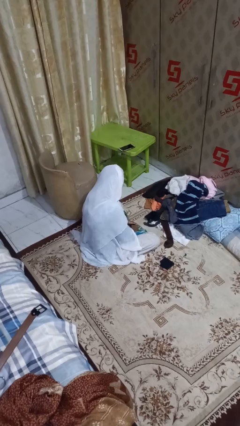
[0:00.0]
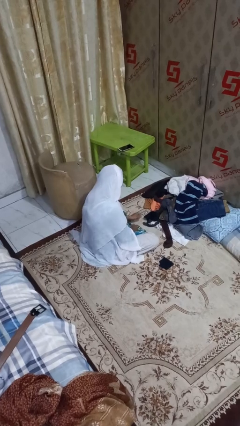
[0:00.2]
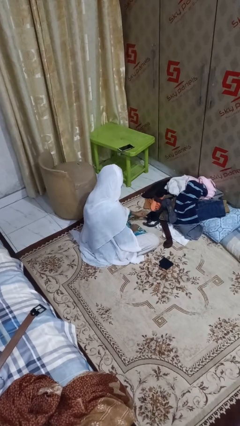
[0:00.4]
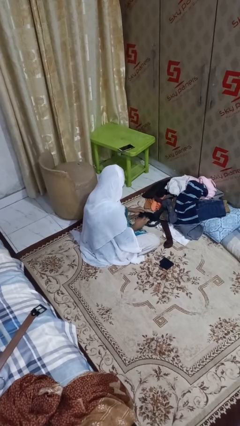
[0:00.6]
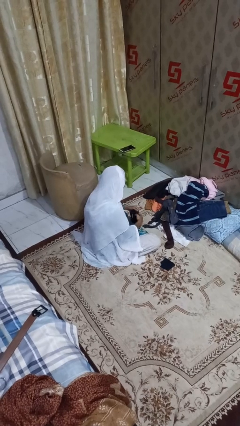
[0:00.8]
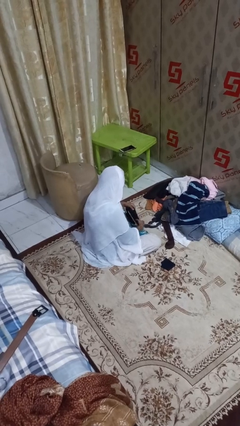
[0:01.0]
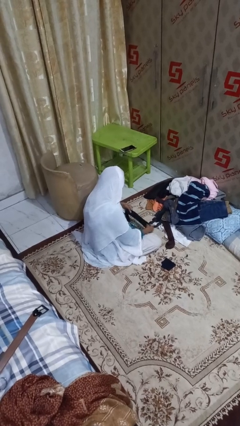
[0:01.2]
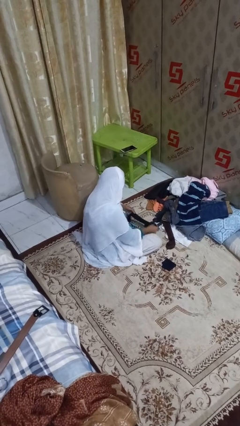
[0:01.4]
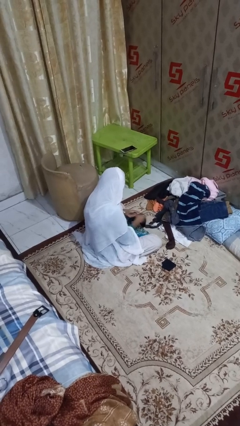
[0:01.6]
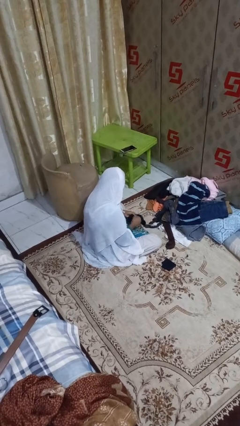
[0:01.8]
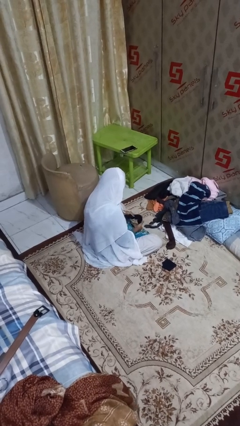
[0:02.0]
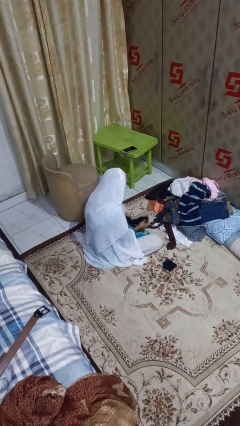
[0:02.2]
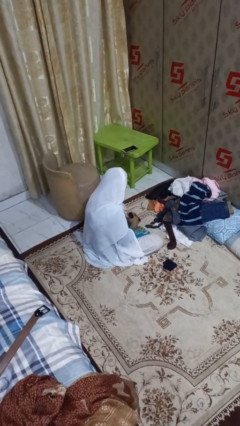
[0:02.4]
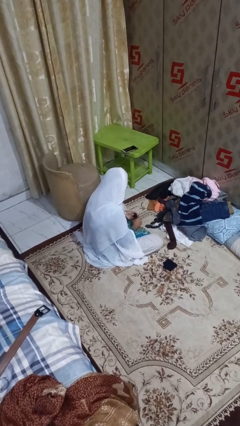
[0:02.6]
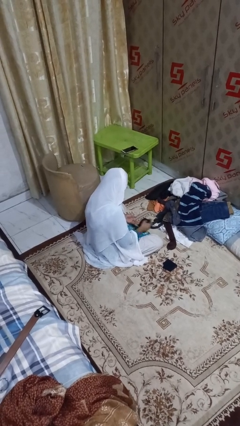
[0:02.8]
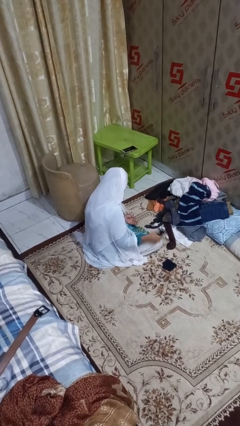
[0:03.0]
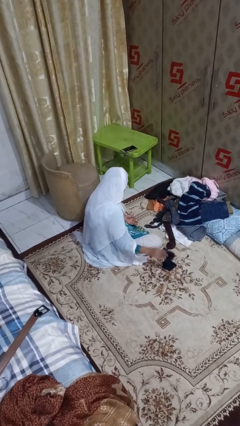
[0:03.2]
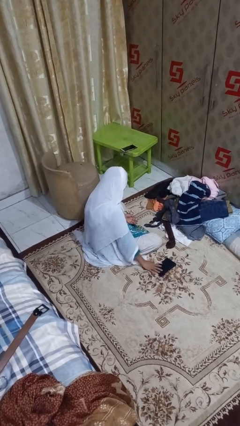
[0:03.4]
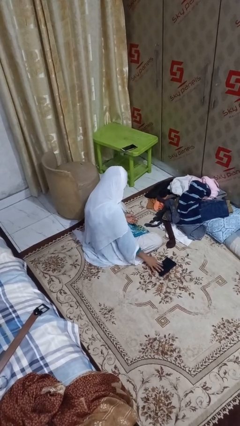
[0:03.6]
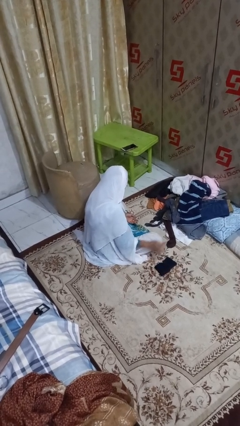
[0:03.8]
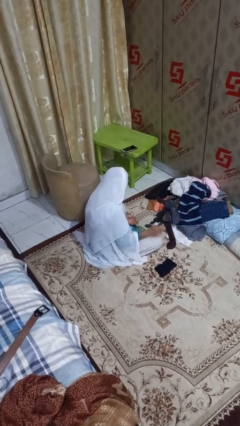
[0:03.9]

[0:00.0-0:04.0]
person folds socks

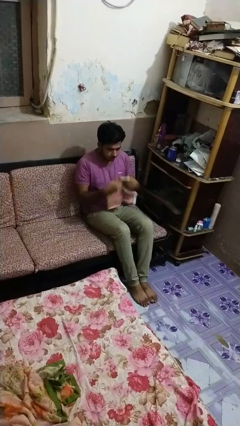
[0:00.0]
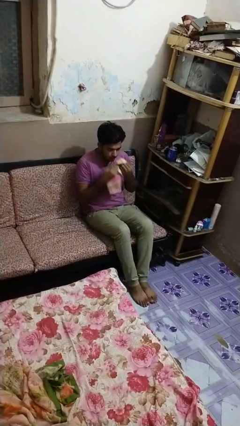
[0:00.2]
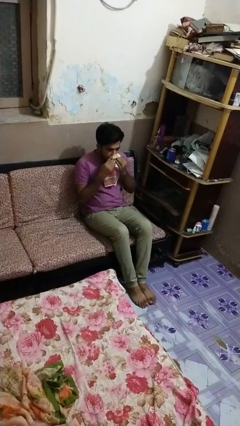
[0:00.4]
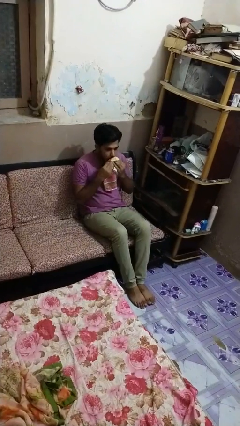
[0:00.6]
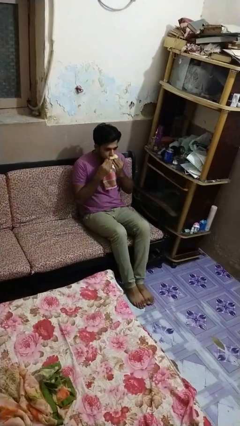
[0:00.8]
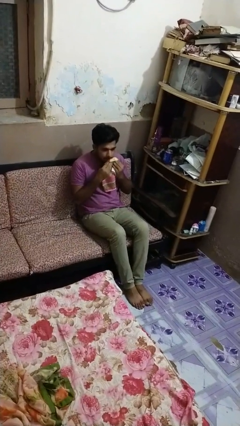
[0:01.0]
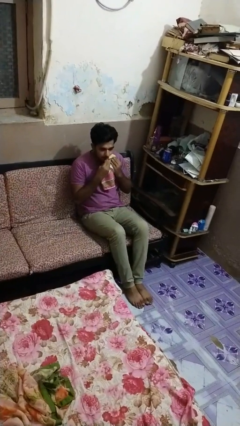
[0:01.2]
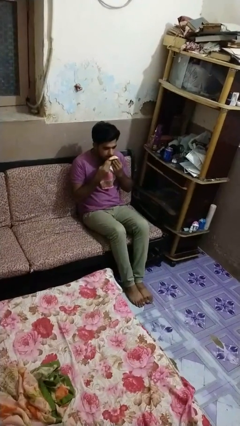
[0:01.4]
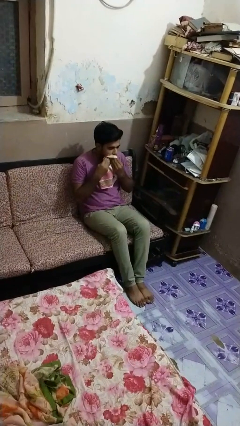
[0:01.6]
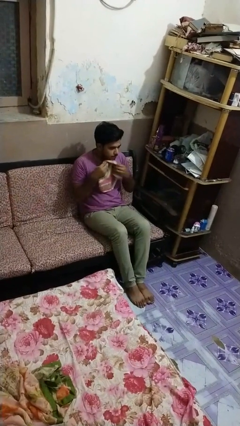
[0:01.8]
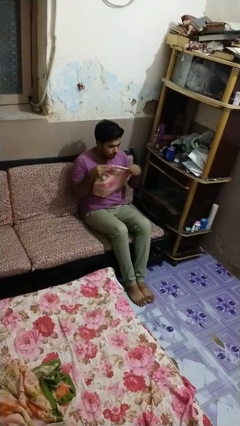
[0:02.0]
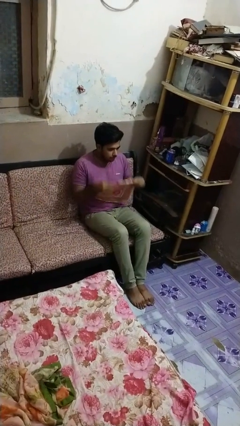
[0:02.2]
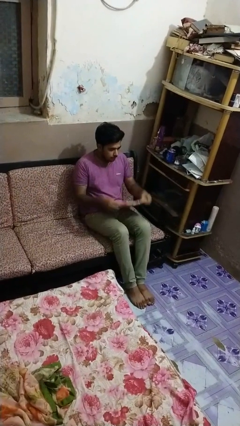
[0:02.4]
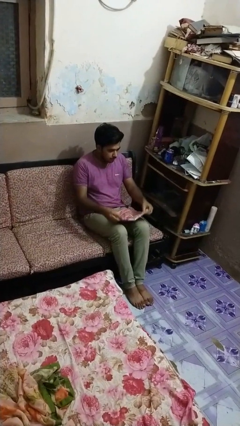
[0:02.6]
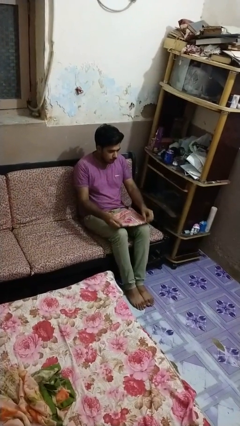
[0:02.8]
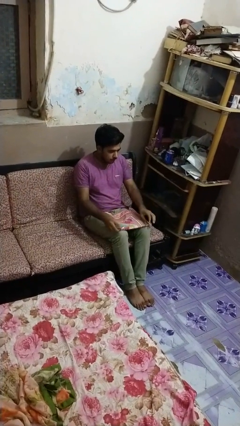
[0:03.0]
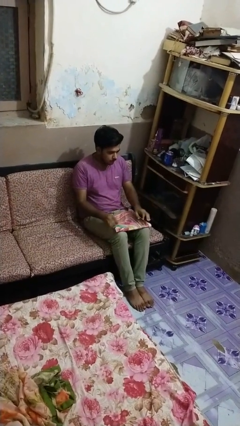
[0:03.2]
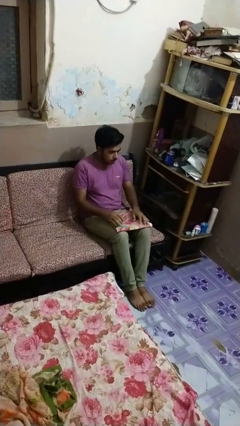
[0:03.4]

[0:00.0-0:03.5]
person wipes mouth with napkin

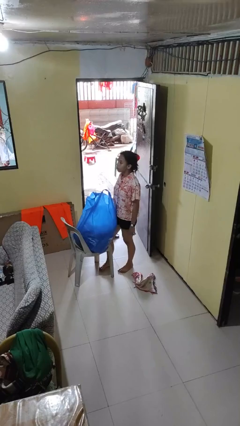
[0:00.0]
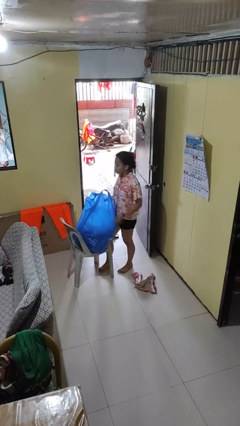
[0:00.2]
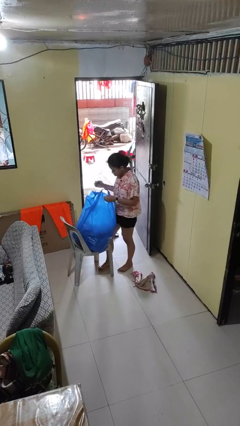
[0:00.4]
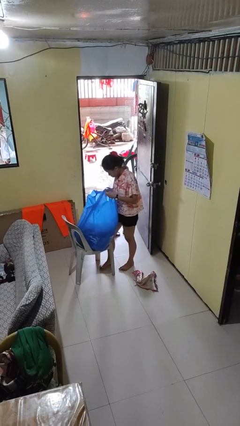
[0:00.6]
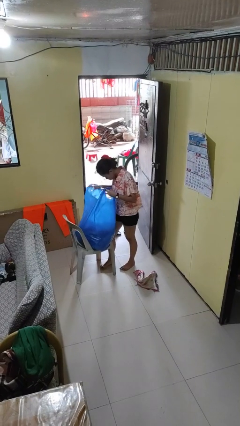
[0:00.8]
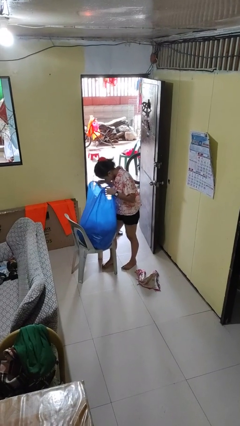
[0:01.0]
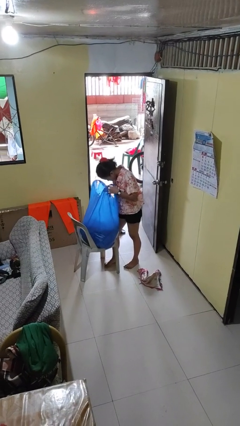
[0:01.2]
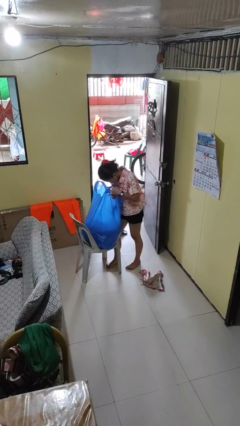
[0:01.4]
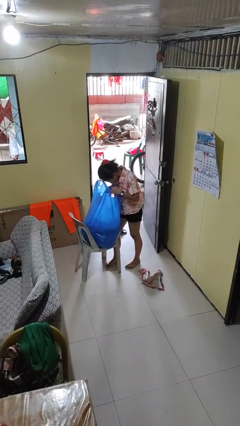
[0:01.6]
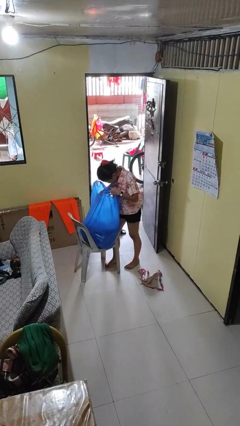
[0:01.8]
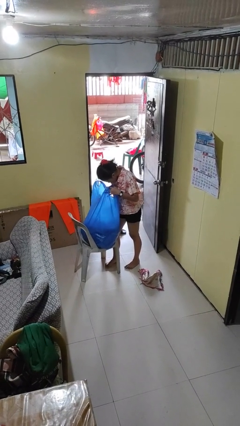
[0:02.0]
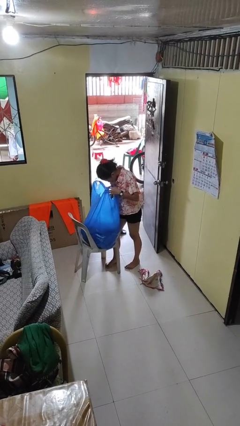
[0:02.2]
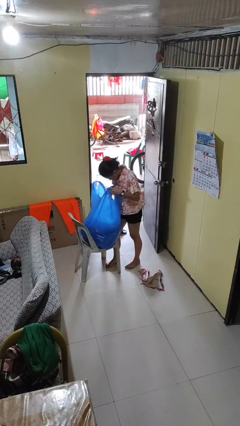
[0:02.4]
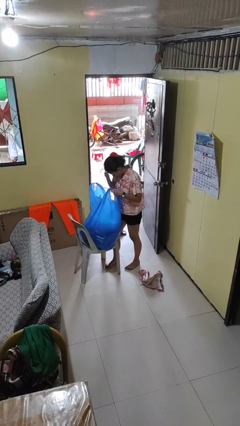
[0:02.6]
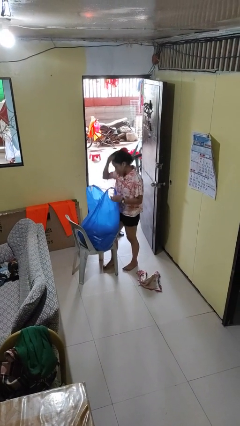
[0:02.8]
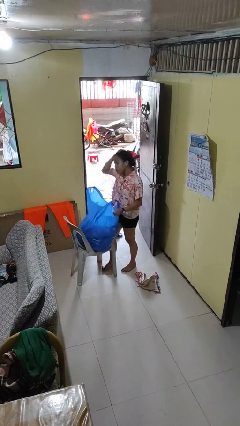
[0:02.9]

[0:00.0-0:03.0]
person searches in bag

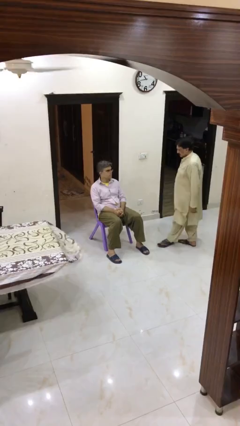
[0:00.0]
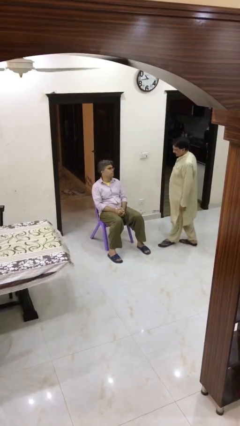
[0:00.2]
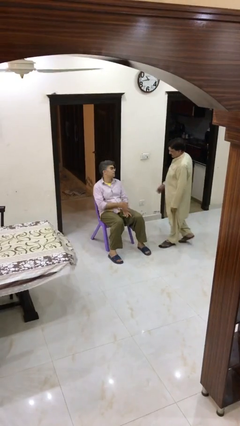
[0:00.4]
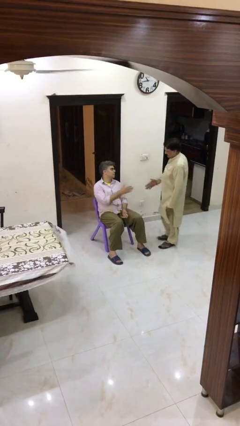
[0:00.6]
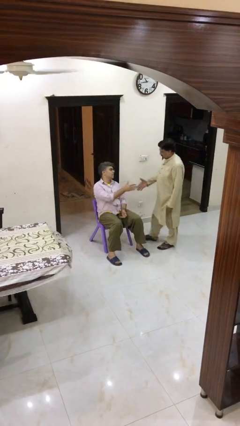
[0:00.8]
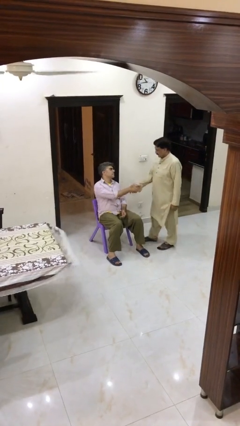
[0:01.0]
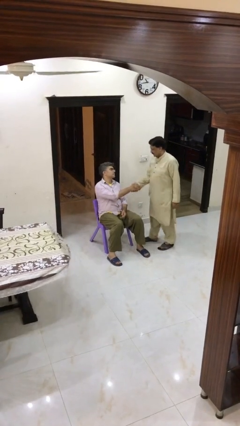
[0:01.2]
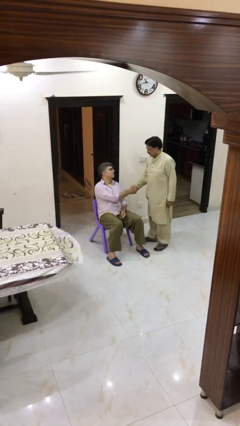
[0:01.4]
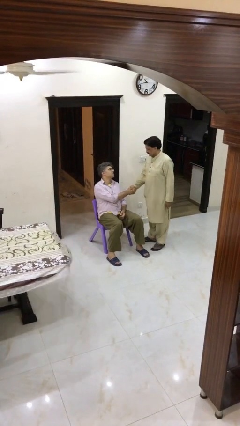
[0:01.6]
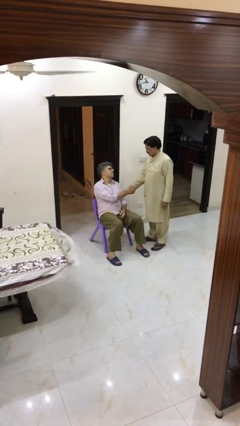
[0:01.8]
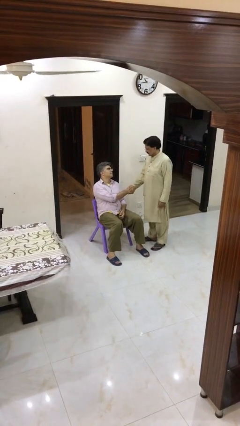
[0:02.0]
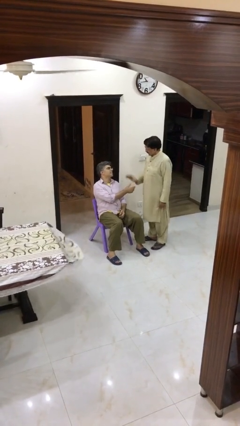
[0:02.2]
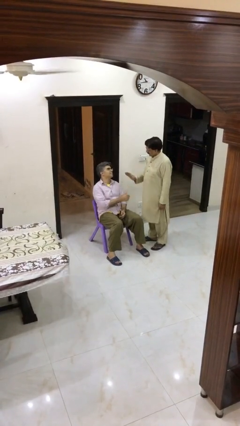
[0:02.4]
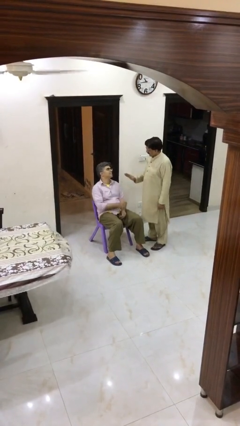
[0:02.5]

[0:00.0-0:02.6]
person shakes hand

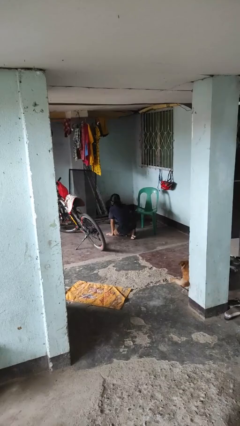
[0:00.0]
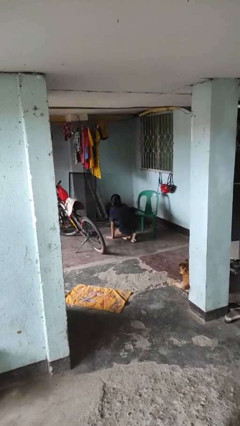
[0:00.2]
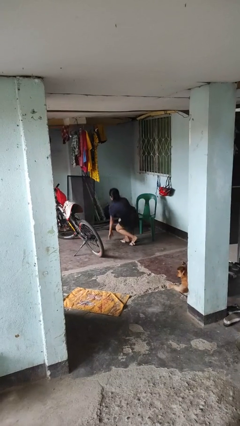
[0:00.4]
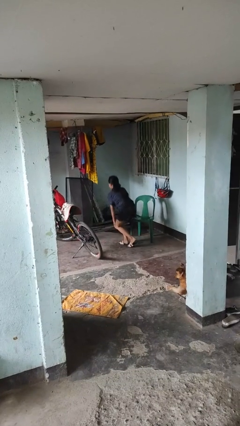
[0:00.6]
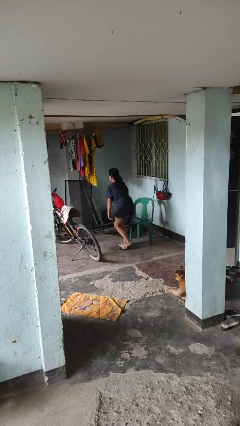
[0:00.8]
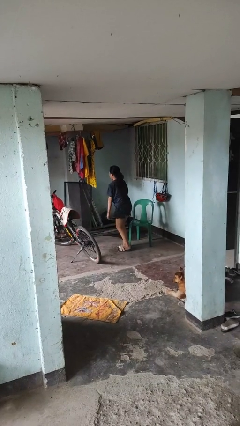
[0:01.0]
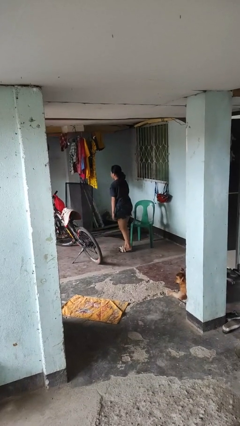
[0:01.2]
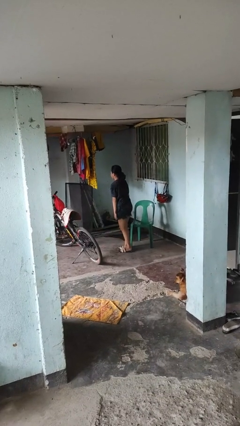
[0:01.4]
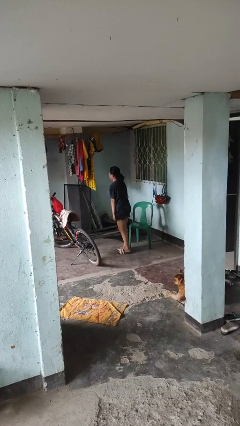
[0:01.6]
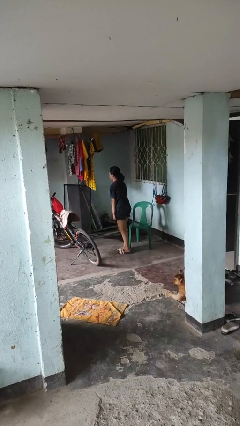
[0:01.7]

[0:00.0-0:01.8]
person stands up from floor

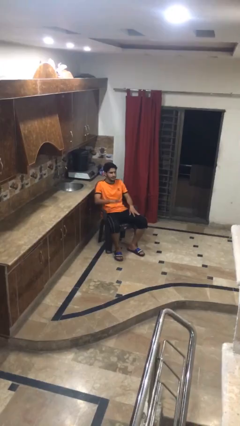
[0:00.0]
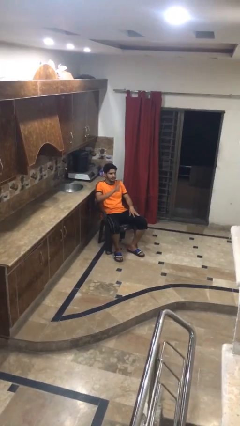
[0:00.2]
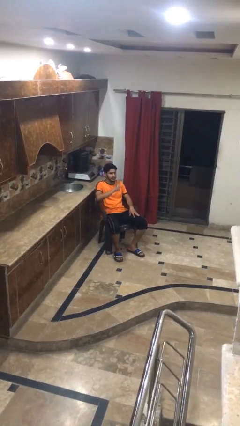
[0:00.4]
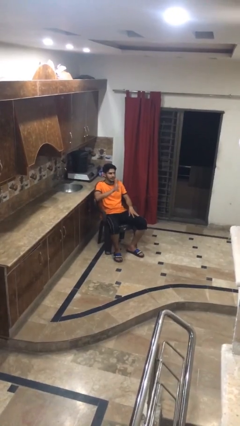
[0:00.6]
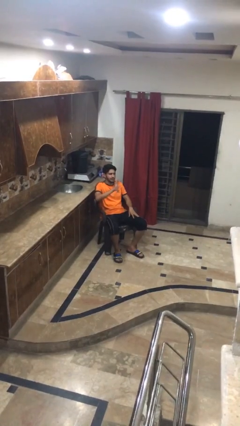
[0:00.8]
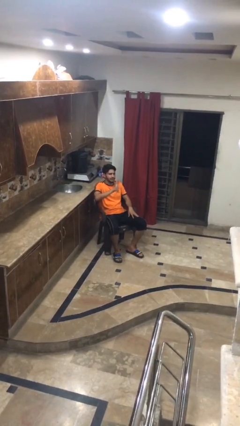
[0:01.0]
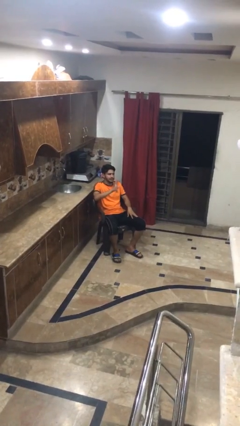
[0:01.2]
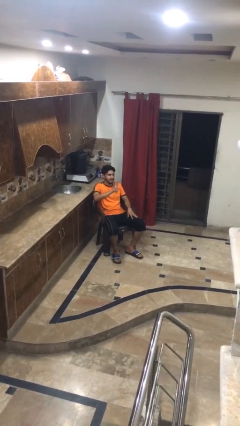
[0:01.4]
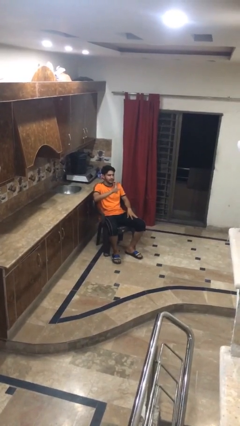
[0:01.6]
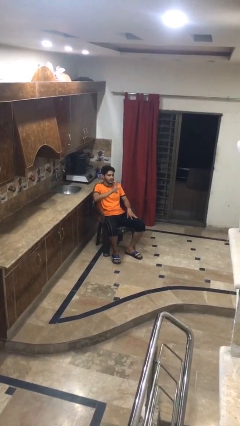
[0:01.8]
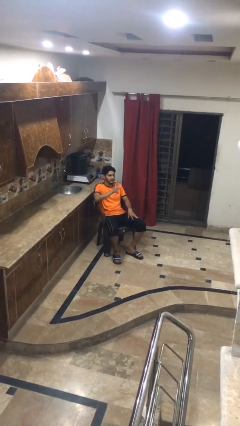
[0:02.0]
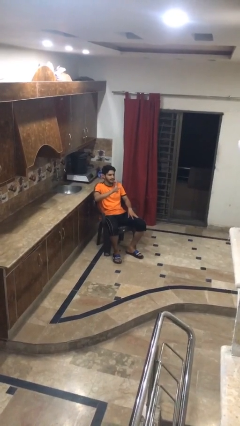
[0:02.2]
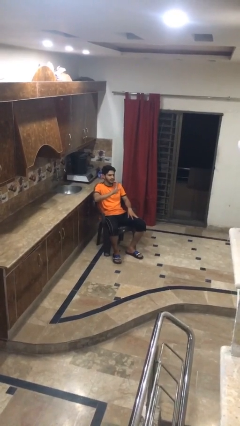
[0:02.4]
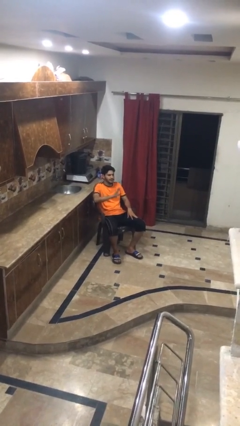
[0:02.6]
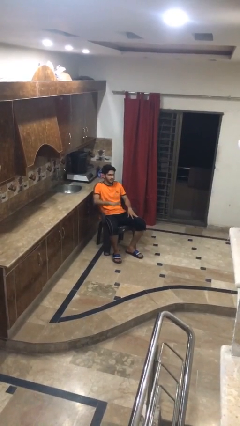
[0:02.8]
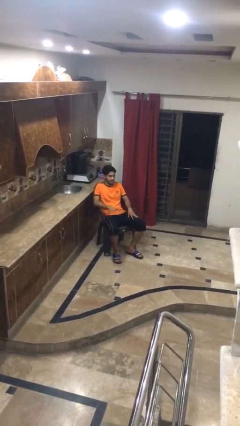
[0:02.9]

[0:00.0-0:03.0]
person waves at person
